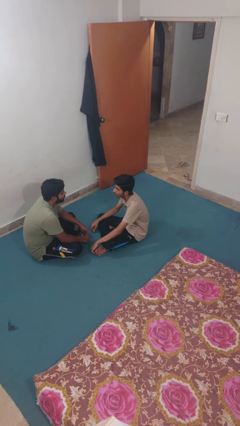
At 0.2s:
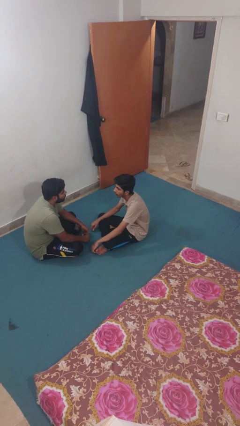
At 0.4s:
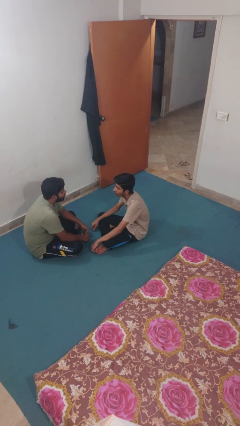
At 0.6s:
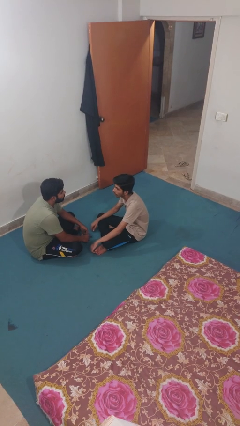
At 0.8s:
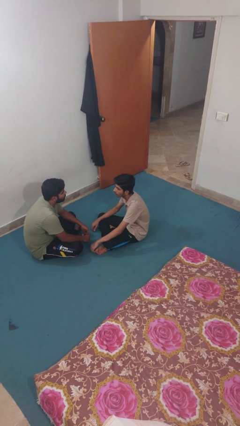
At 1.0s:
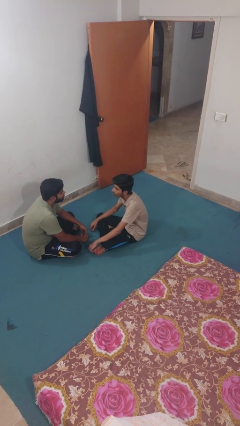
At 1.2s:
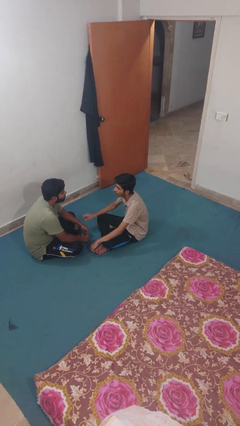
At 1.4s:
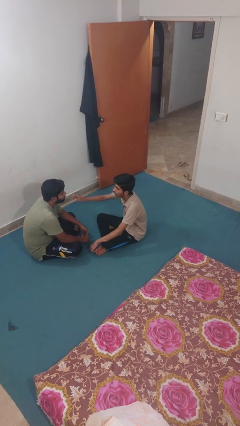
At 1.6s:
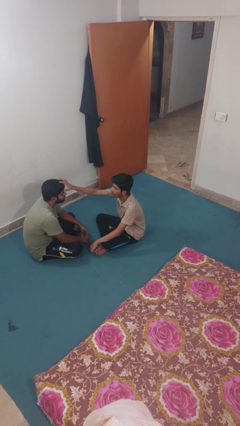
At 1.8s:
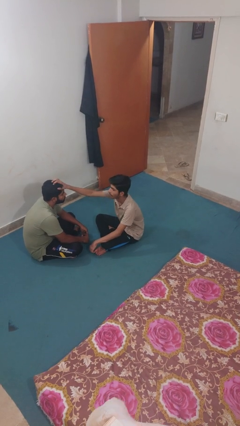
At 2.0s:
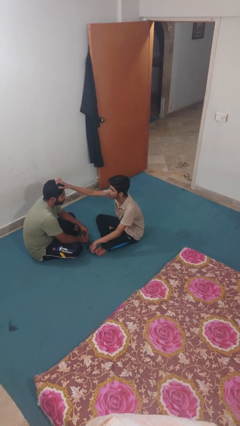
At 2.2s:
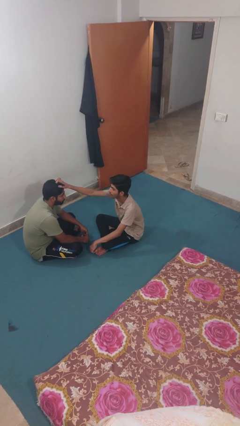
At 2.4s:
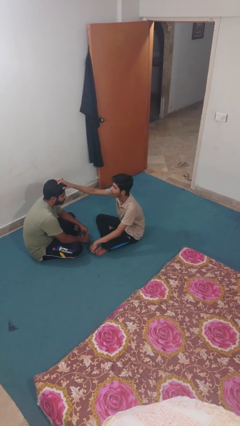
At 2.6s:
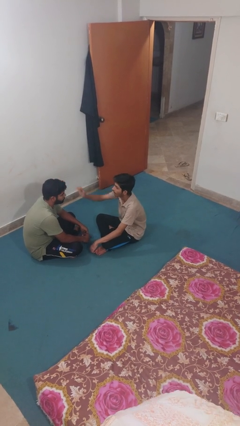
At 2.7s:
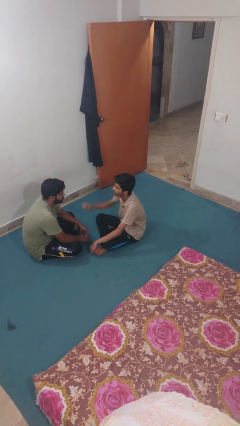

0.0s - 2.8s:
person grabs person by hair

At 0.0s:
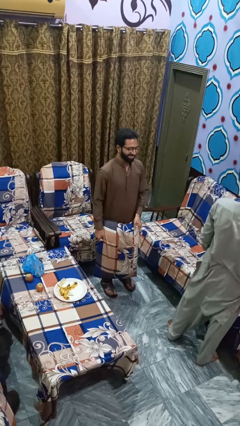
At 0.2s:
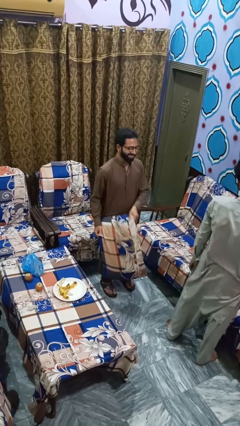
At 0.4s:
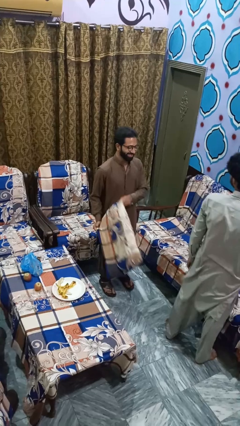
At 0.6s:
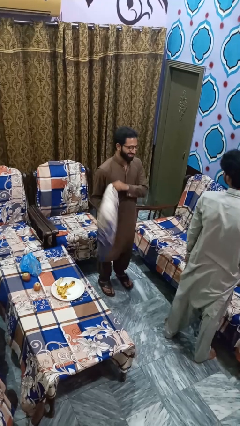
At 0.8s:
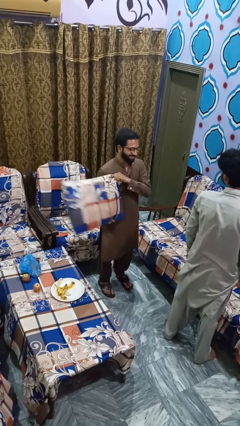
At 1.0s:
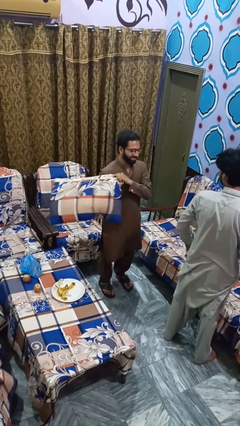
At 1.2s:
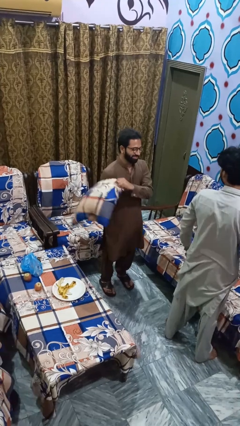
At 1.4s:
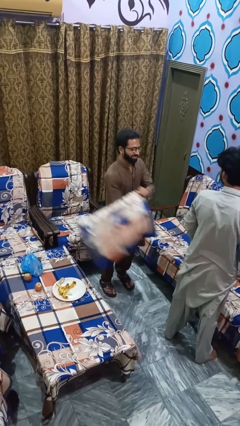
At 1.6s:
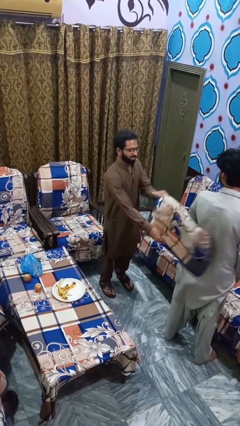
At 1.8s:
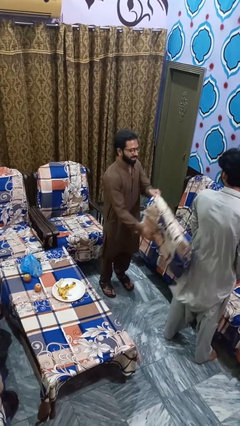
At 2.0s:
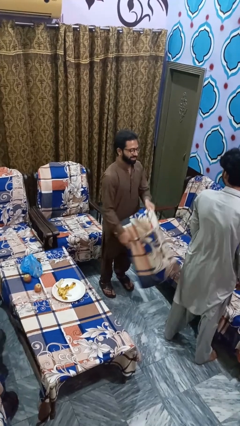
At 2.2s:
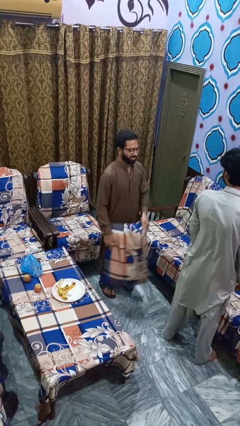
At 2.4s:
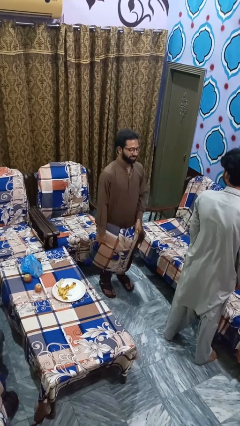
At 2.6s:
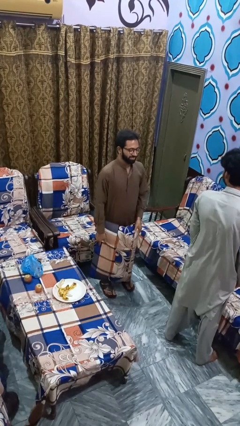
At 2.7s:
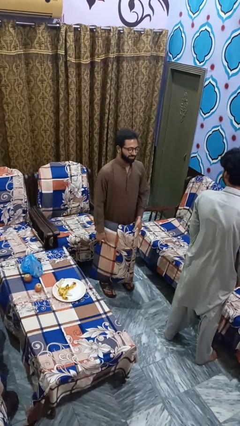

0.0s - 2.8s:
person hits person with pillow

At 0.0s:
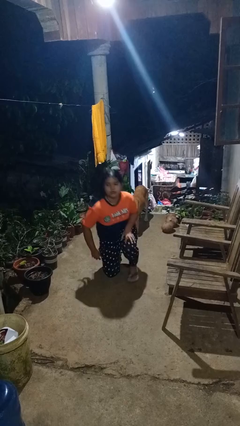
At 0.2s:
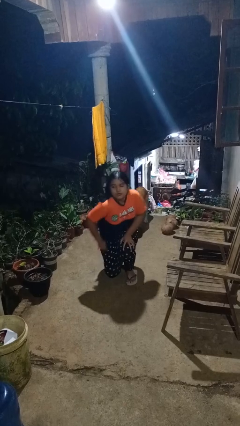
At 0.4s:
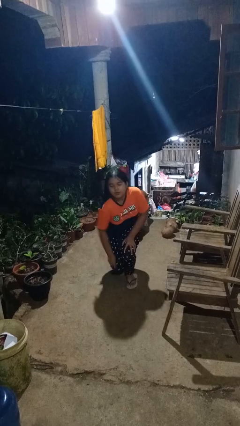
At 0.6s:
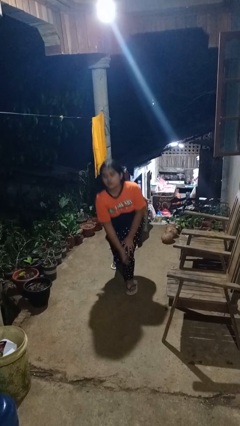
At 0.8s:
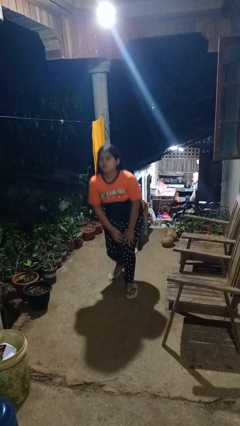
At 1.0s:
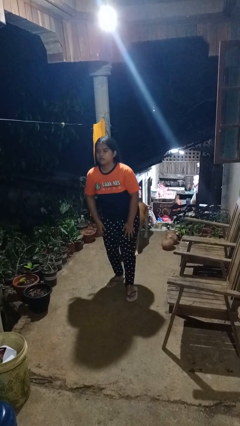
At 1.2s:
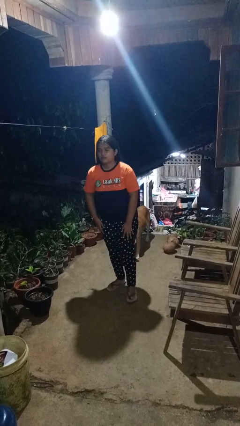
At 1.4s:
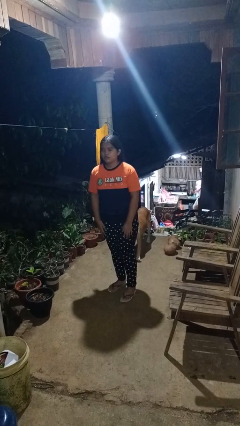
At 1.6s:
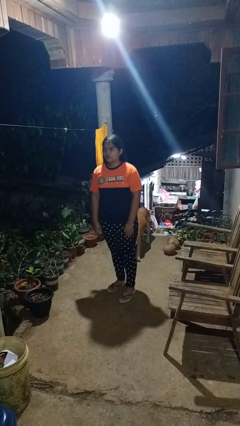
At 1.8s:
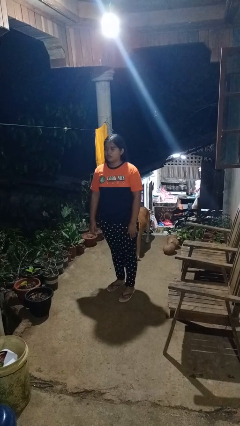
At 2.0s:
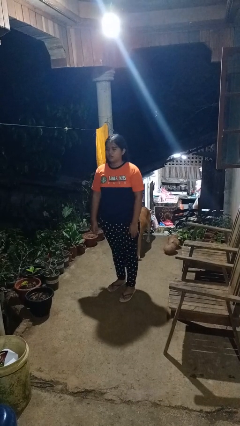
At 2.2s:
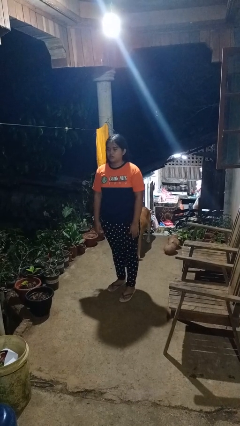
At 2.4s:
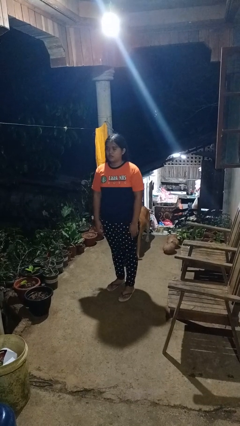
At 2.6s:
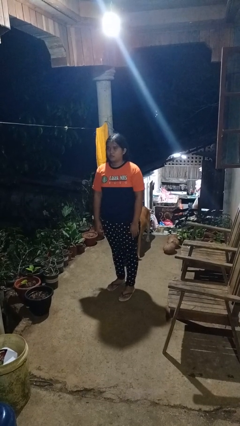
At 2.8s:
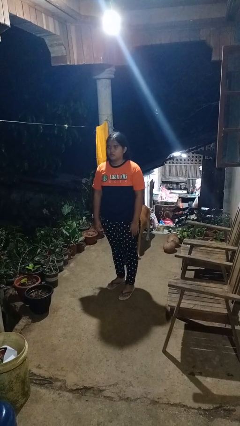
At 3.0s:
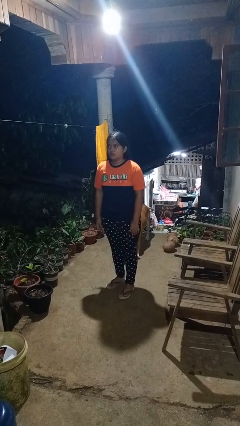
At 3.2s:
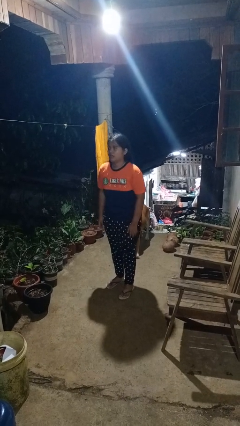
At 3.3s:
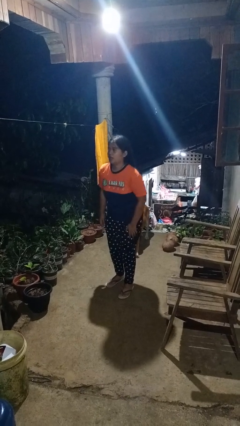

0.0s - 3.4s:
person stands up from floor

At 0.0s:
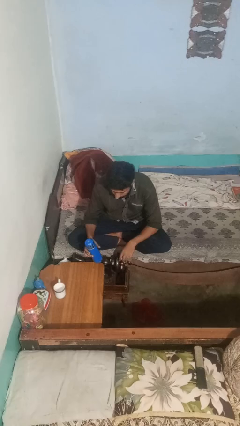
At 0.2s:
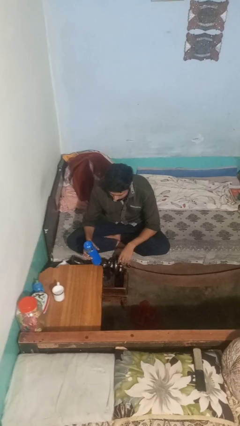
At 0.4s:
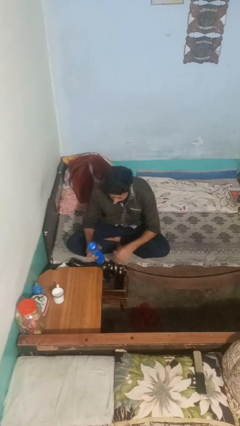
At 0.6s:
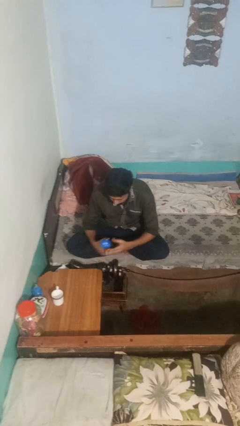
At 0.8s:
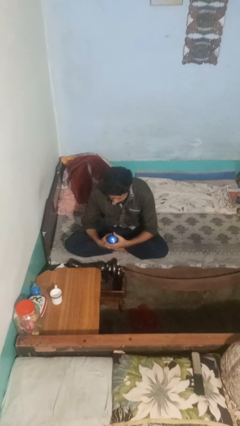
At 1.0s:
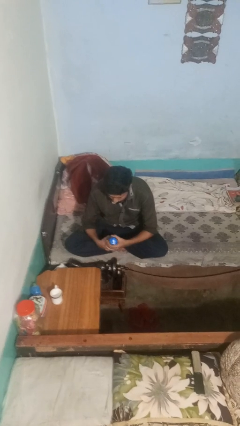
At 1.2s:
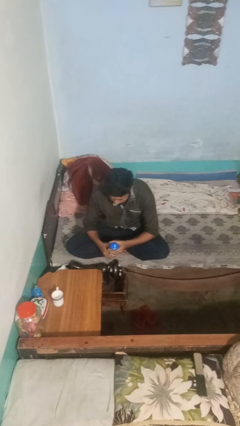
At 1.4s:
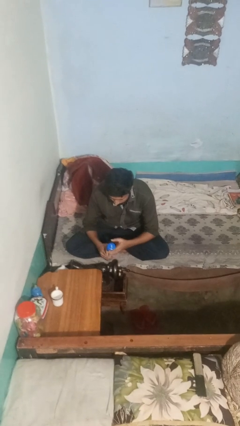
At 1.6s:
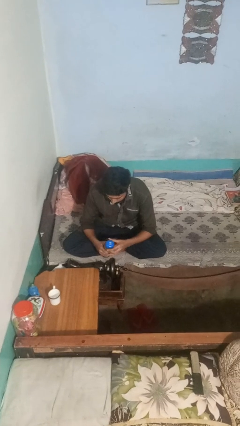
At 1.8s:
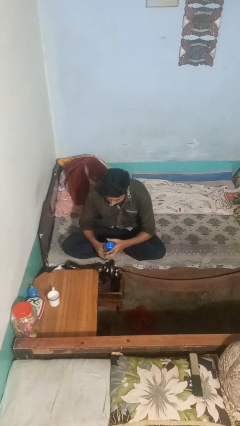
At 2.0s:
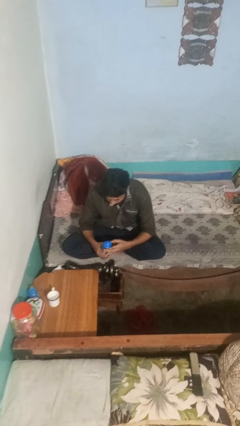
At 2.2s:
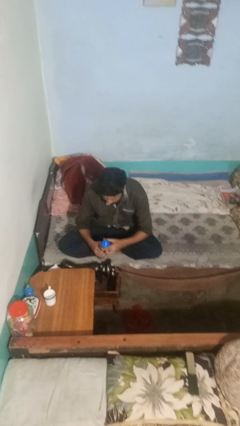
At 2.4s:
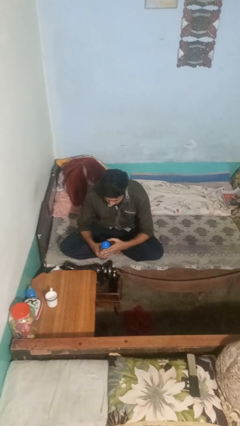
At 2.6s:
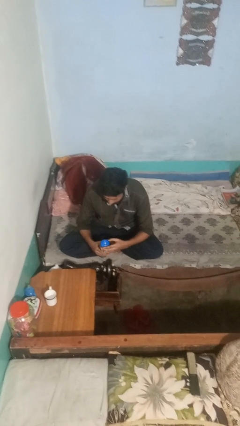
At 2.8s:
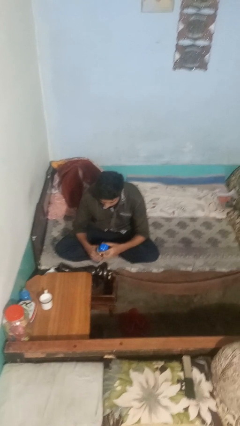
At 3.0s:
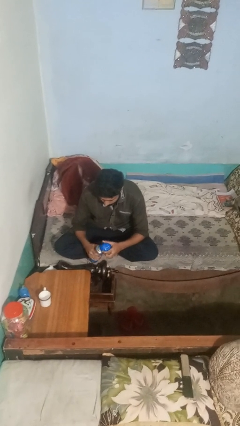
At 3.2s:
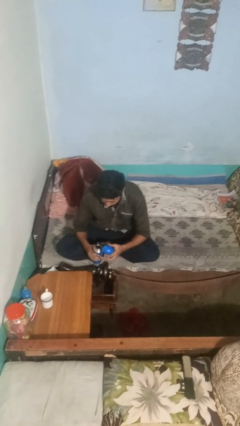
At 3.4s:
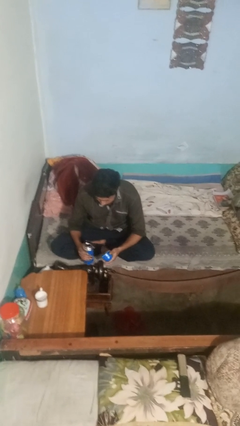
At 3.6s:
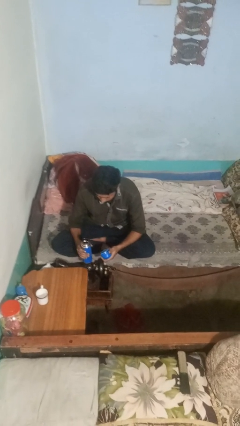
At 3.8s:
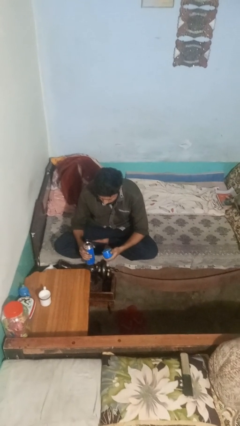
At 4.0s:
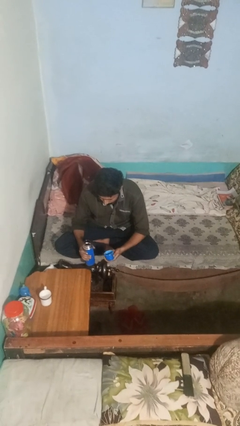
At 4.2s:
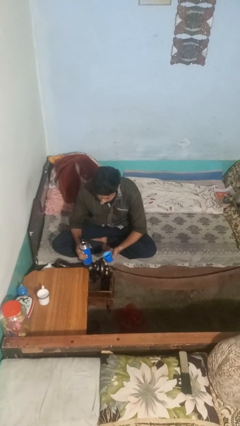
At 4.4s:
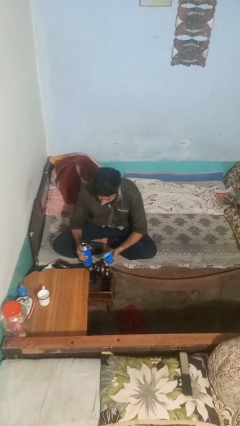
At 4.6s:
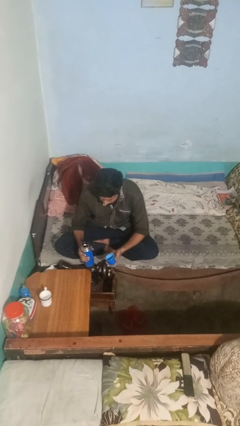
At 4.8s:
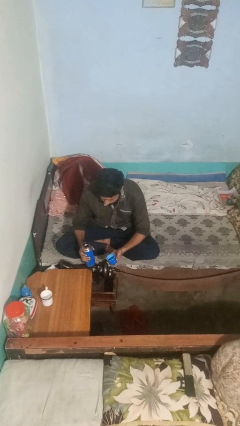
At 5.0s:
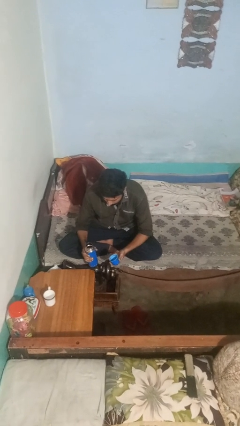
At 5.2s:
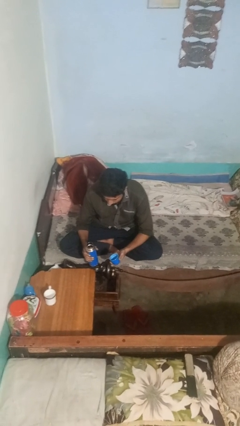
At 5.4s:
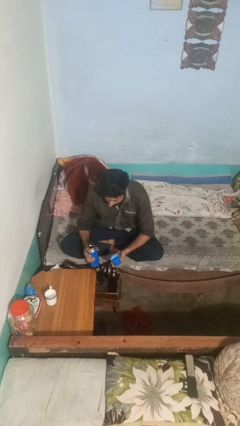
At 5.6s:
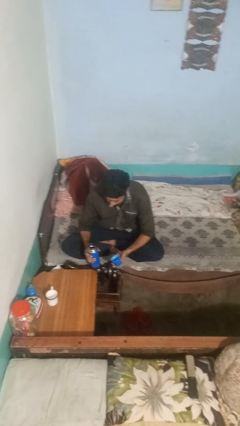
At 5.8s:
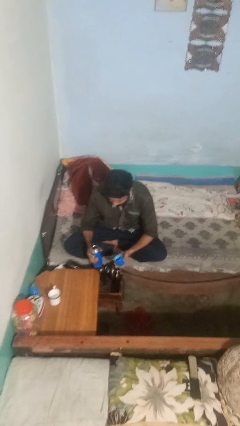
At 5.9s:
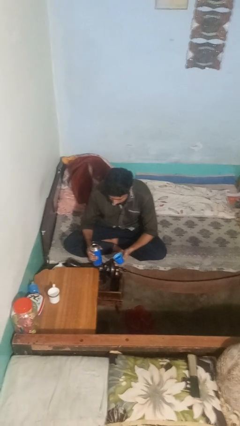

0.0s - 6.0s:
person unscrews lid from bottle

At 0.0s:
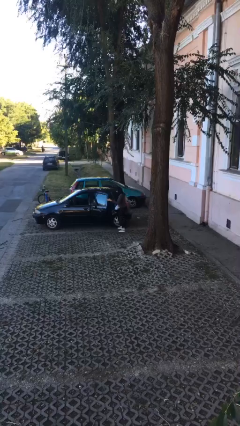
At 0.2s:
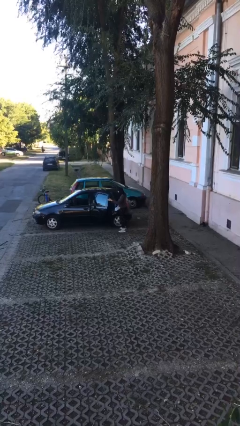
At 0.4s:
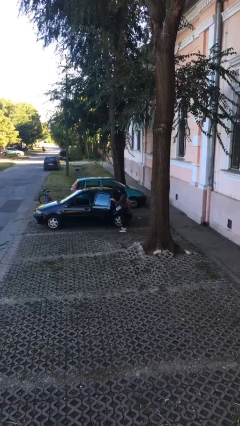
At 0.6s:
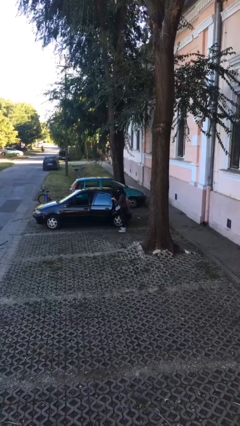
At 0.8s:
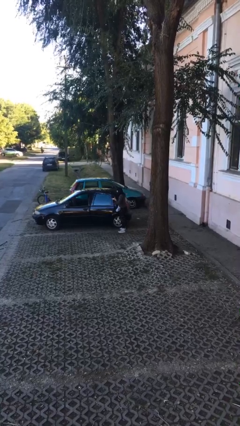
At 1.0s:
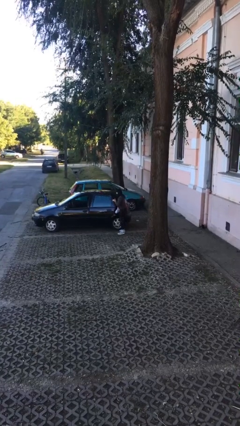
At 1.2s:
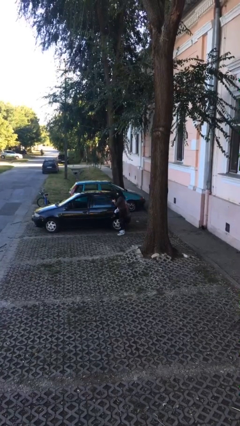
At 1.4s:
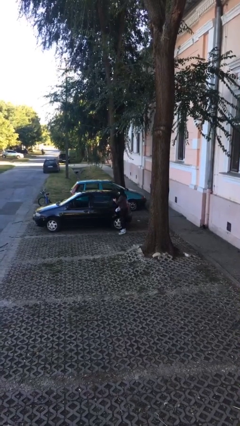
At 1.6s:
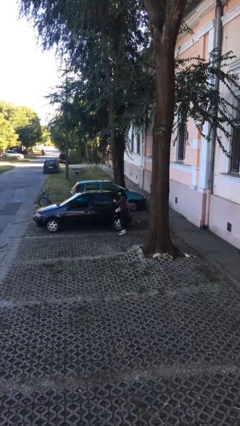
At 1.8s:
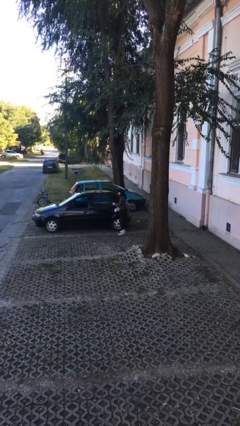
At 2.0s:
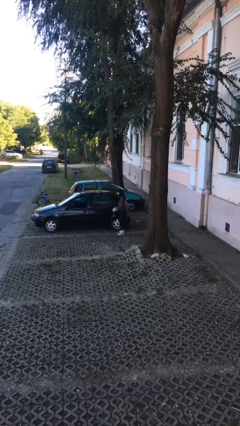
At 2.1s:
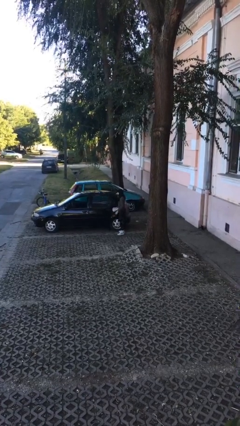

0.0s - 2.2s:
person closes car door

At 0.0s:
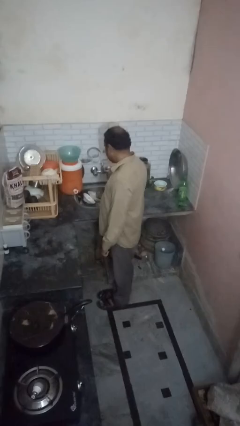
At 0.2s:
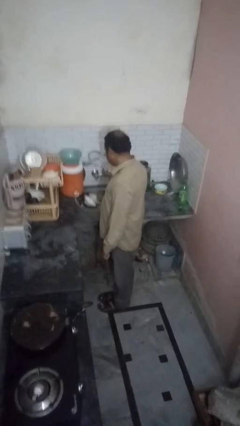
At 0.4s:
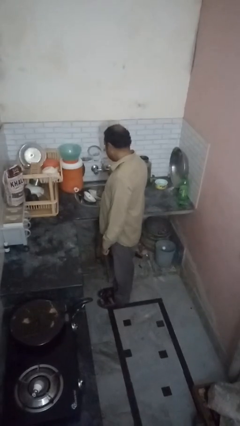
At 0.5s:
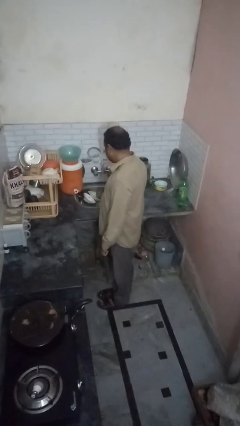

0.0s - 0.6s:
person closes dishwasher
